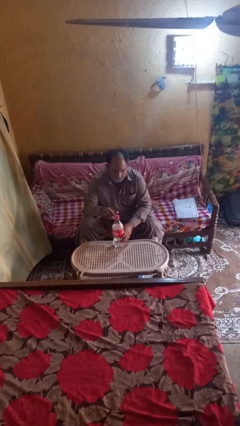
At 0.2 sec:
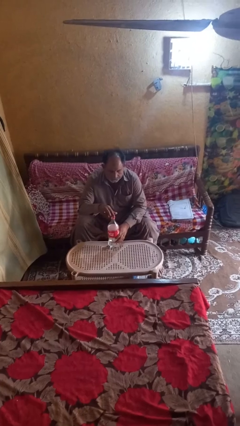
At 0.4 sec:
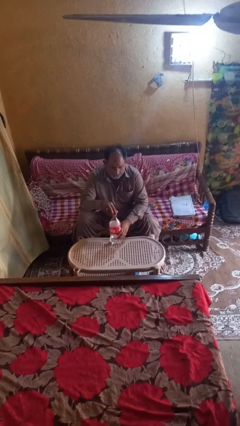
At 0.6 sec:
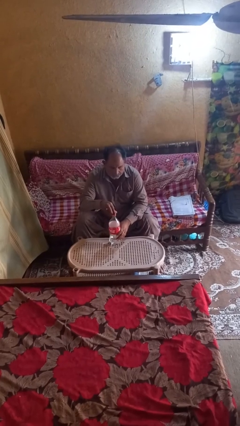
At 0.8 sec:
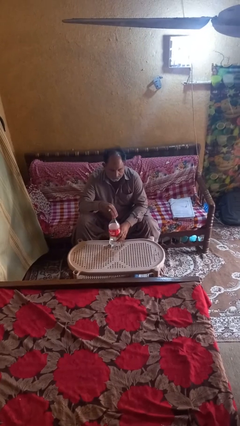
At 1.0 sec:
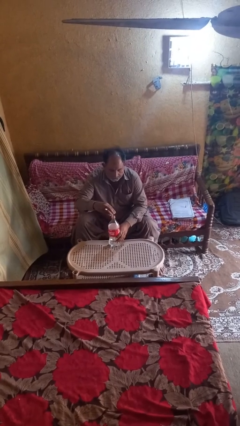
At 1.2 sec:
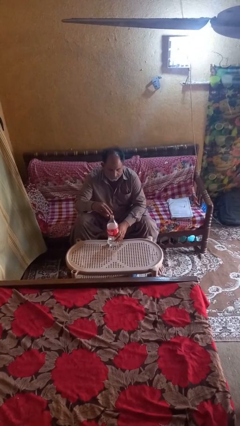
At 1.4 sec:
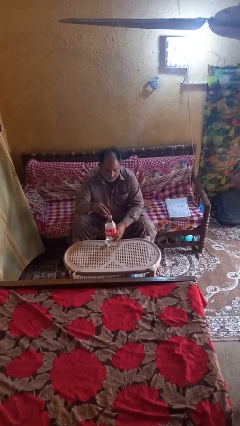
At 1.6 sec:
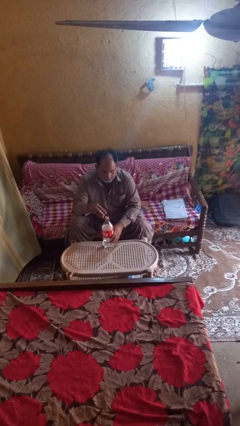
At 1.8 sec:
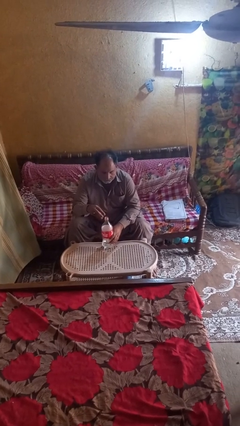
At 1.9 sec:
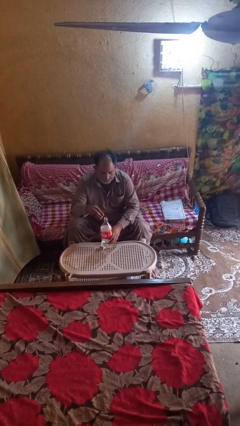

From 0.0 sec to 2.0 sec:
person unscrews lid from bottle

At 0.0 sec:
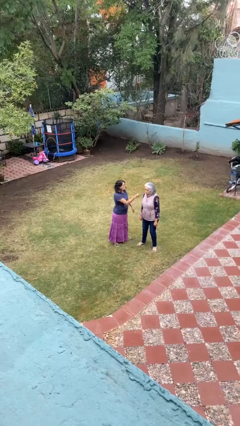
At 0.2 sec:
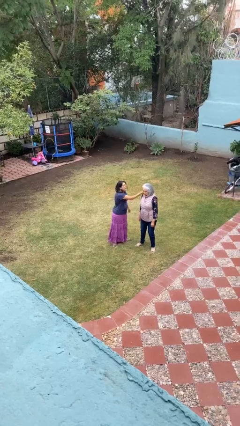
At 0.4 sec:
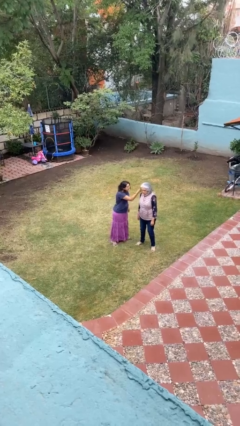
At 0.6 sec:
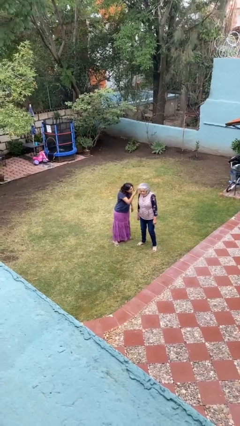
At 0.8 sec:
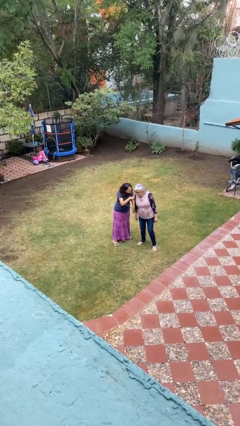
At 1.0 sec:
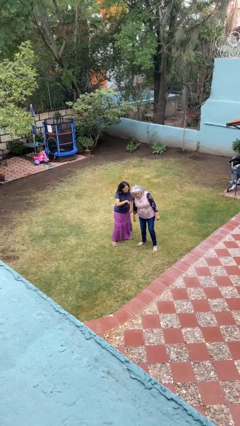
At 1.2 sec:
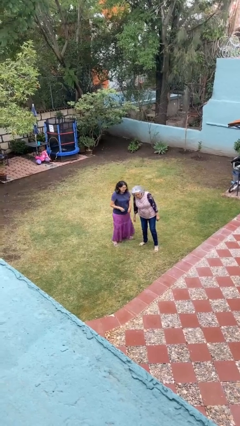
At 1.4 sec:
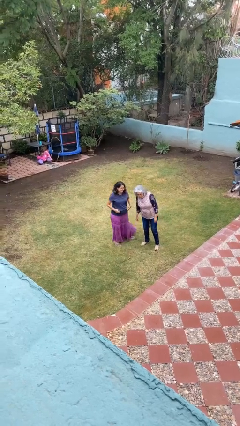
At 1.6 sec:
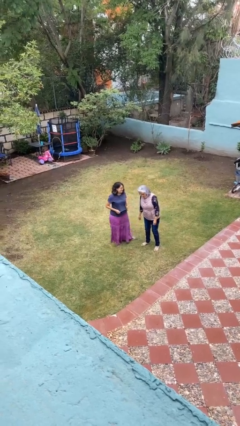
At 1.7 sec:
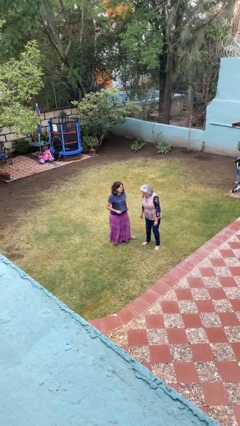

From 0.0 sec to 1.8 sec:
person grabs person by hair

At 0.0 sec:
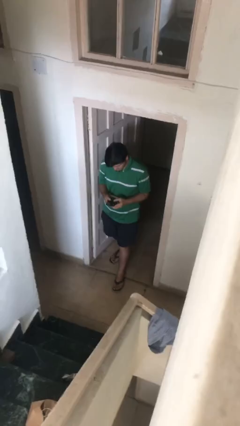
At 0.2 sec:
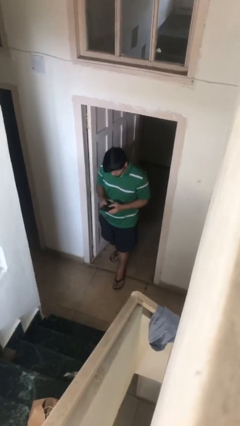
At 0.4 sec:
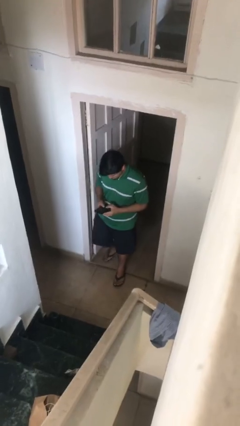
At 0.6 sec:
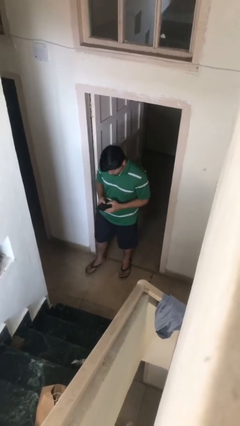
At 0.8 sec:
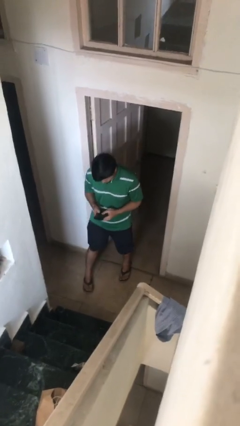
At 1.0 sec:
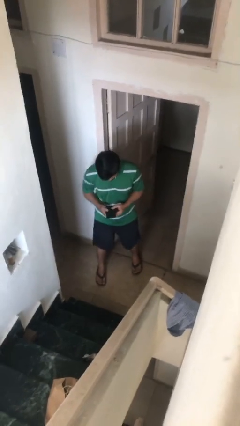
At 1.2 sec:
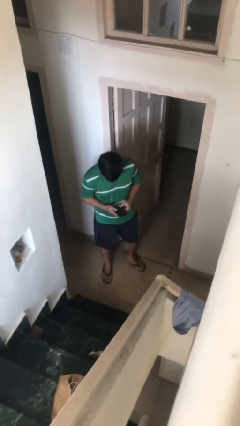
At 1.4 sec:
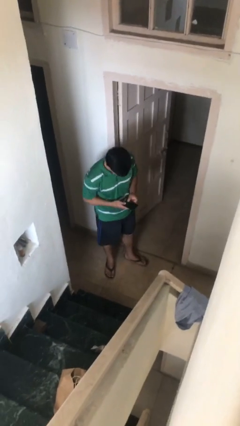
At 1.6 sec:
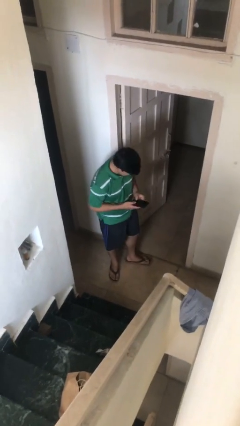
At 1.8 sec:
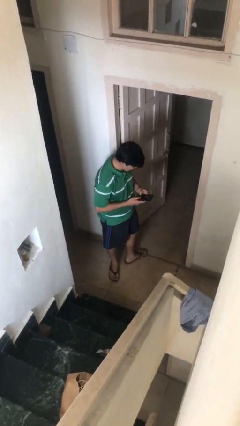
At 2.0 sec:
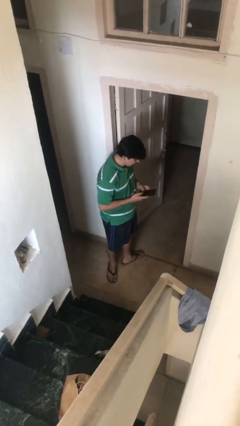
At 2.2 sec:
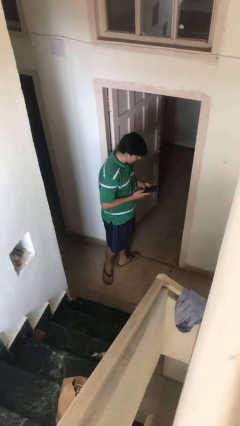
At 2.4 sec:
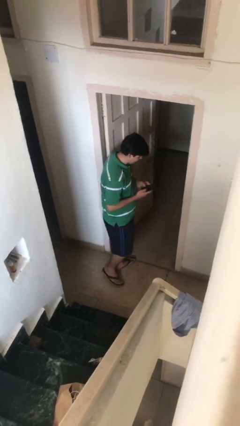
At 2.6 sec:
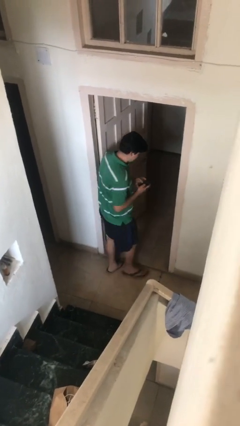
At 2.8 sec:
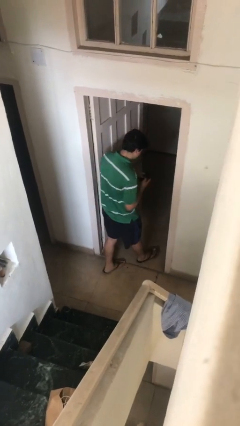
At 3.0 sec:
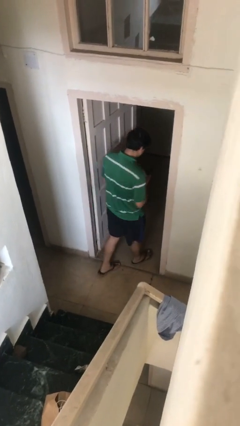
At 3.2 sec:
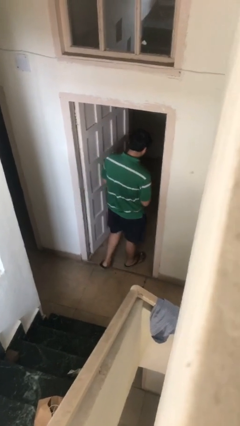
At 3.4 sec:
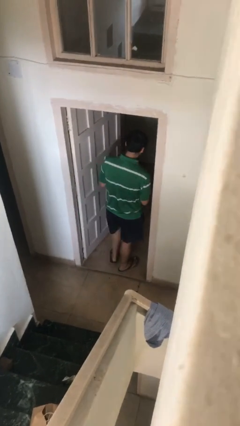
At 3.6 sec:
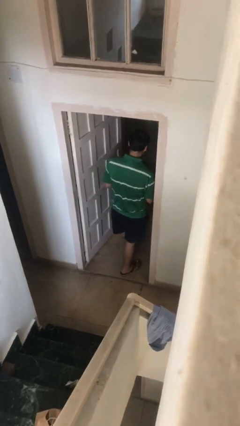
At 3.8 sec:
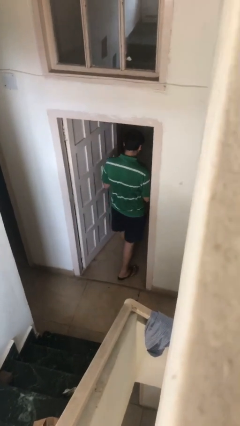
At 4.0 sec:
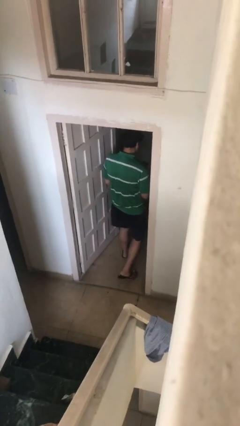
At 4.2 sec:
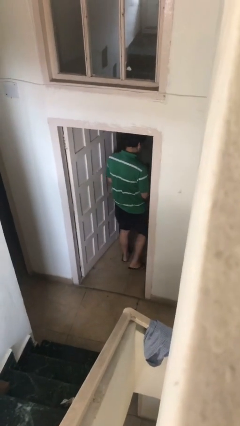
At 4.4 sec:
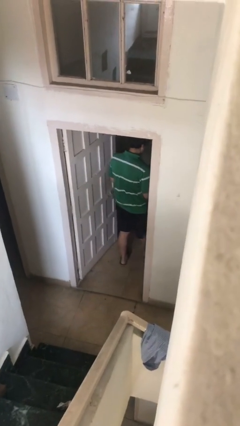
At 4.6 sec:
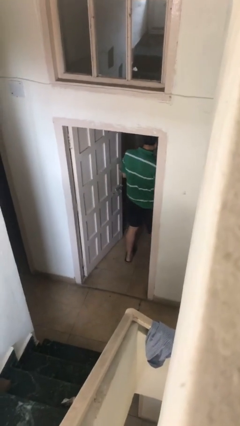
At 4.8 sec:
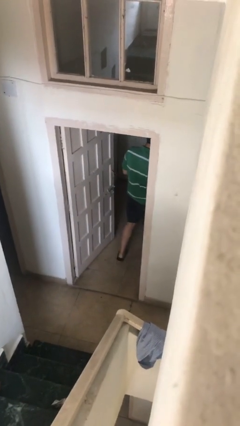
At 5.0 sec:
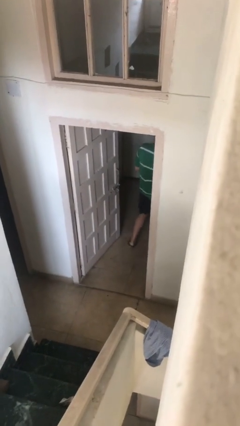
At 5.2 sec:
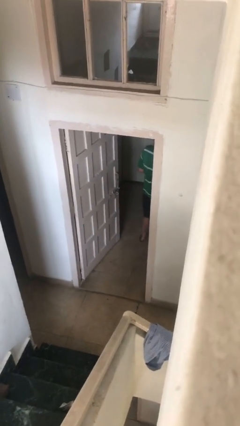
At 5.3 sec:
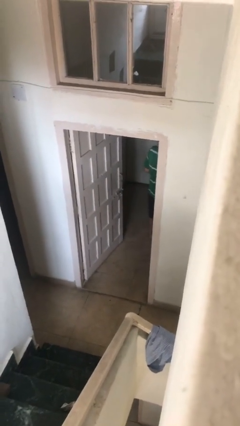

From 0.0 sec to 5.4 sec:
person exits scene through structure

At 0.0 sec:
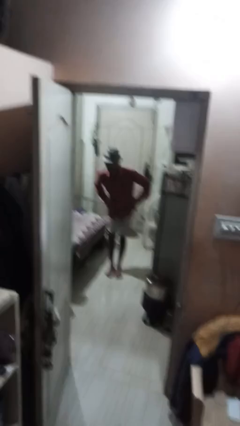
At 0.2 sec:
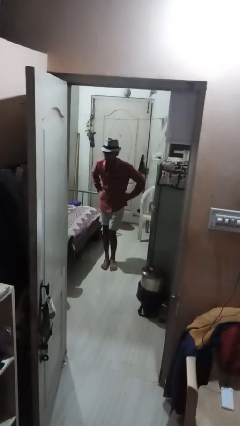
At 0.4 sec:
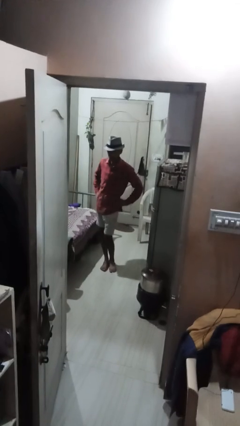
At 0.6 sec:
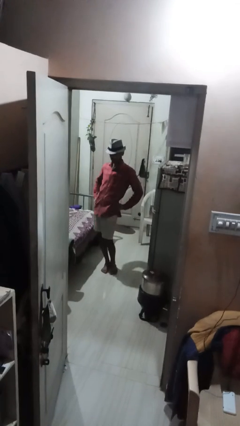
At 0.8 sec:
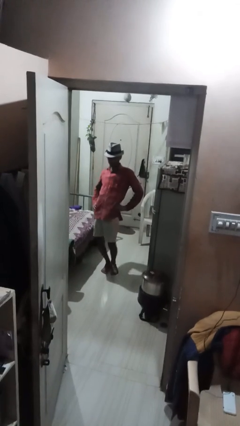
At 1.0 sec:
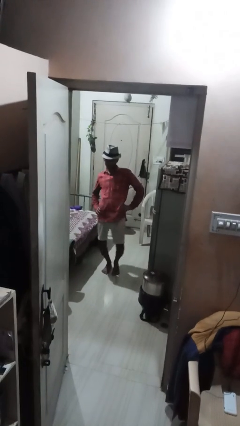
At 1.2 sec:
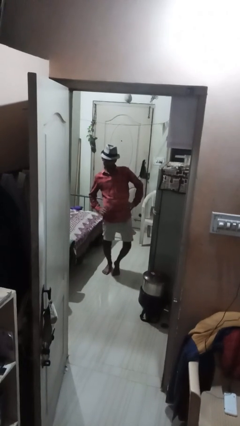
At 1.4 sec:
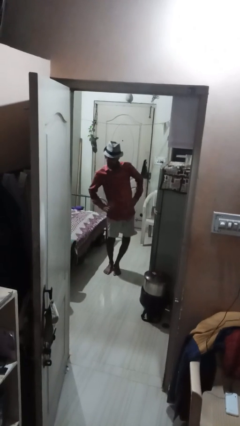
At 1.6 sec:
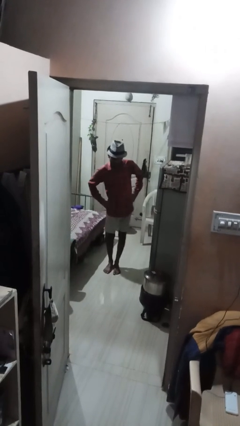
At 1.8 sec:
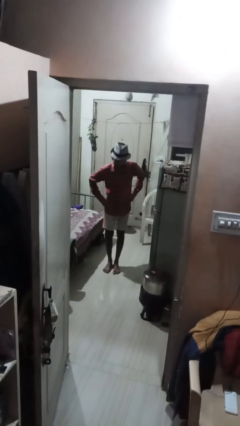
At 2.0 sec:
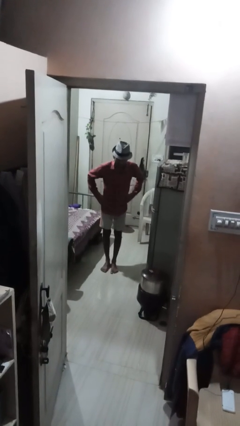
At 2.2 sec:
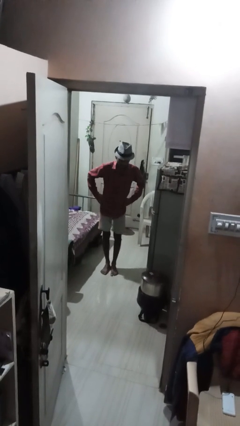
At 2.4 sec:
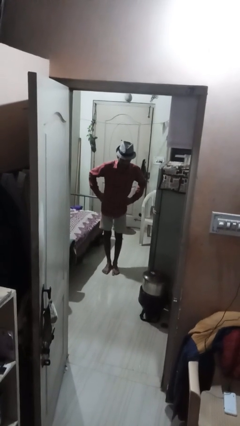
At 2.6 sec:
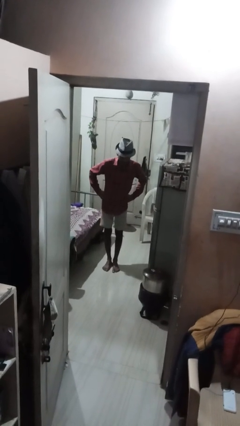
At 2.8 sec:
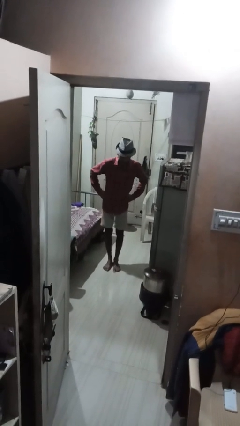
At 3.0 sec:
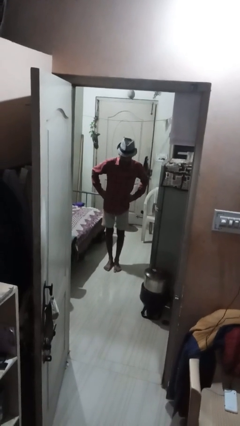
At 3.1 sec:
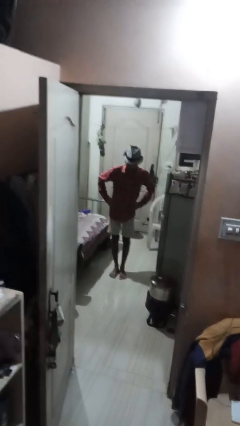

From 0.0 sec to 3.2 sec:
person wiggles hips

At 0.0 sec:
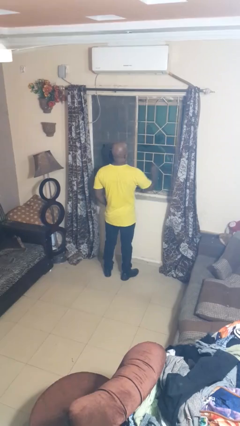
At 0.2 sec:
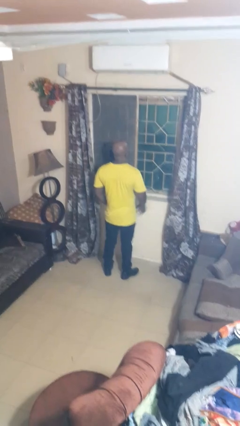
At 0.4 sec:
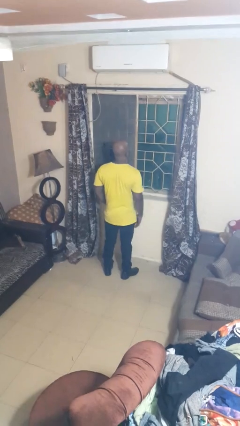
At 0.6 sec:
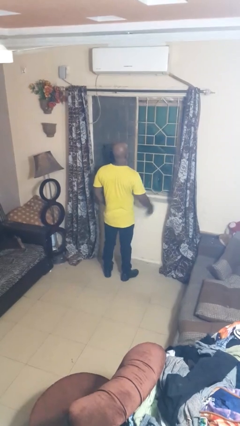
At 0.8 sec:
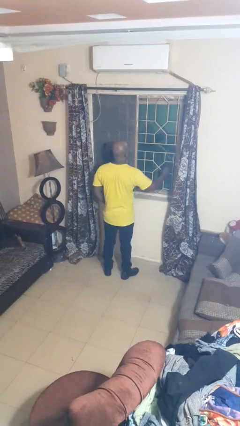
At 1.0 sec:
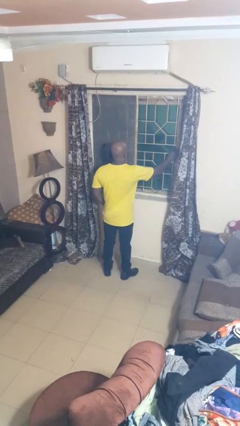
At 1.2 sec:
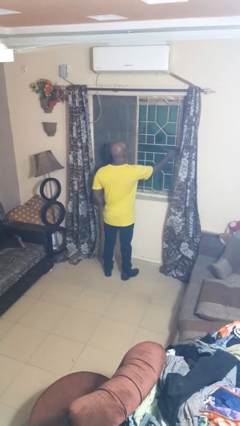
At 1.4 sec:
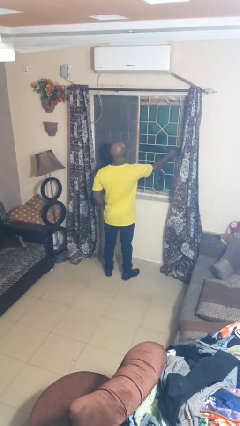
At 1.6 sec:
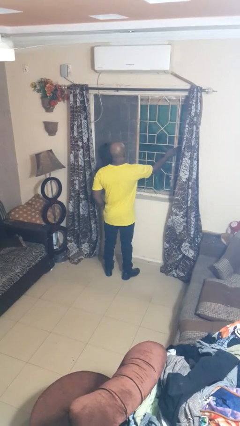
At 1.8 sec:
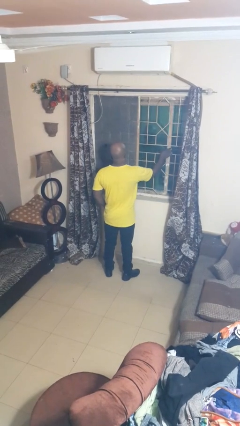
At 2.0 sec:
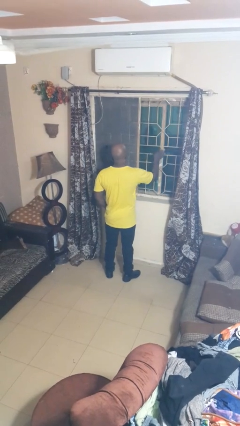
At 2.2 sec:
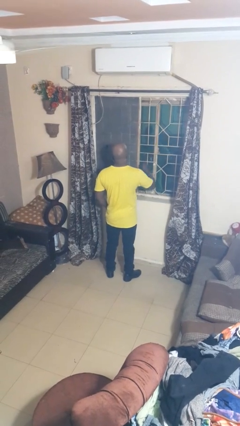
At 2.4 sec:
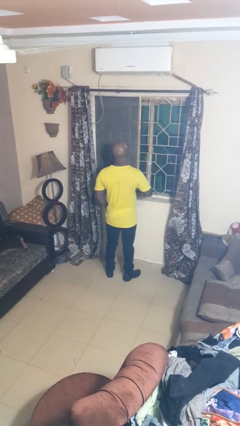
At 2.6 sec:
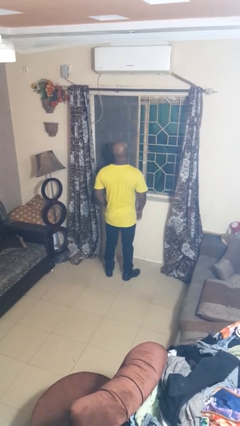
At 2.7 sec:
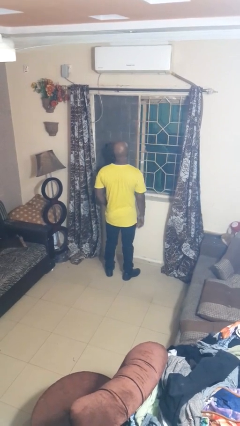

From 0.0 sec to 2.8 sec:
person closes home window

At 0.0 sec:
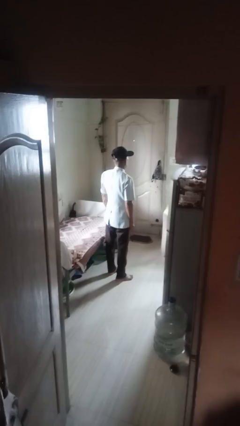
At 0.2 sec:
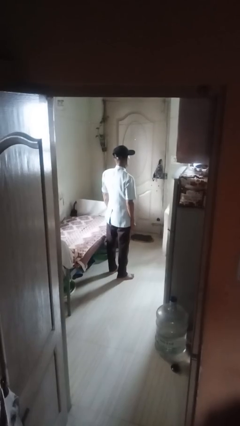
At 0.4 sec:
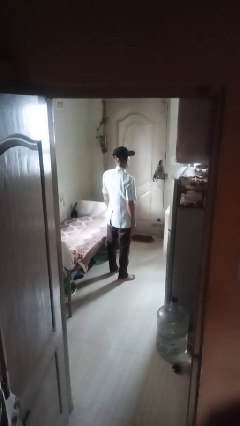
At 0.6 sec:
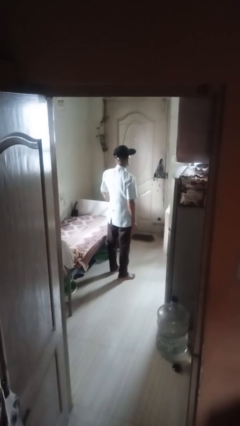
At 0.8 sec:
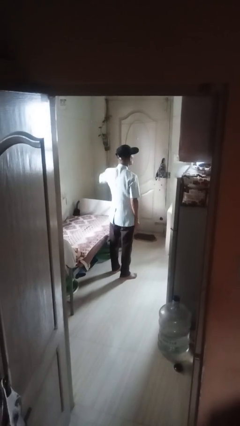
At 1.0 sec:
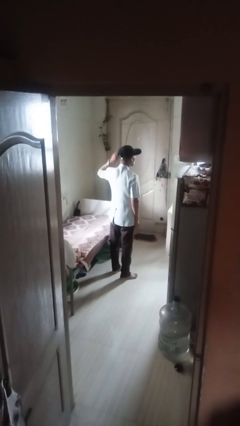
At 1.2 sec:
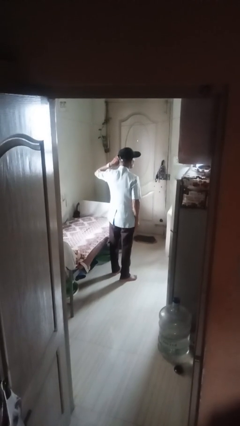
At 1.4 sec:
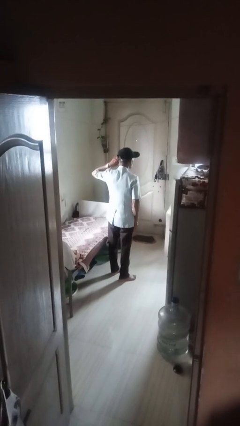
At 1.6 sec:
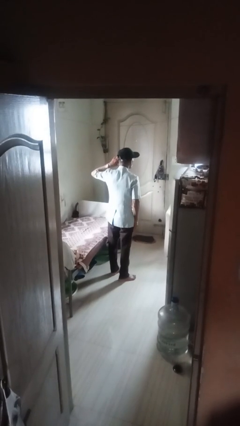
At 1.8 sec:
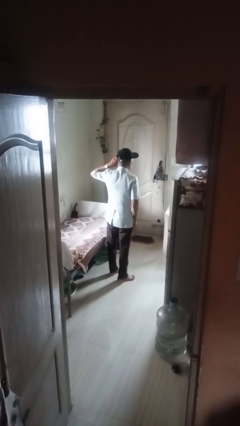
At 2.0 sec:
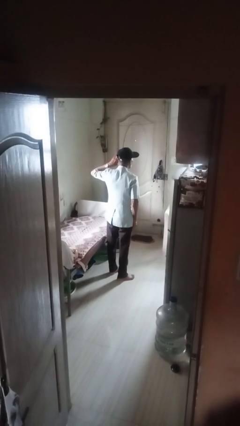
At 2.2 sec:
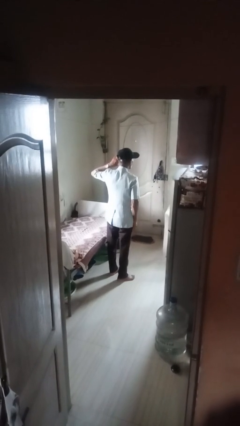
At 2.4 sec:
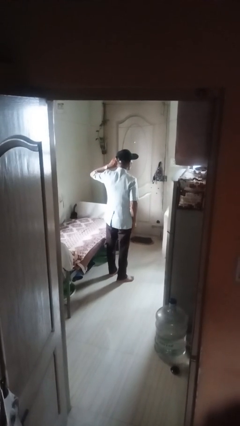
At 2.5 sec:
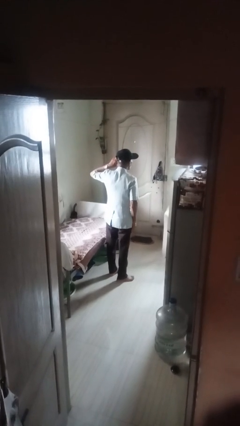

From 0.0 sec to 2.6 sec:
person gestures listen closely
